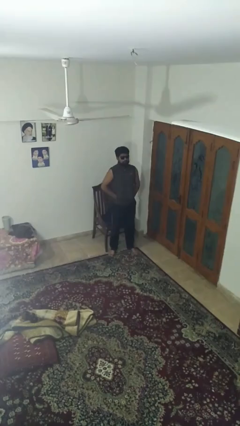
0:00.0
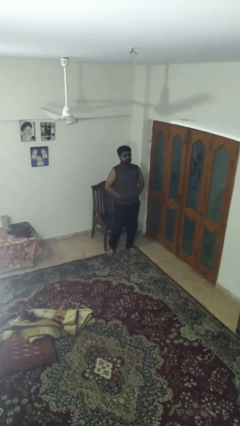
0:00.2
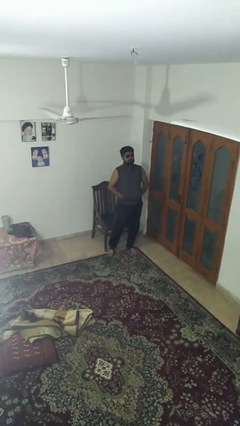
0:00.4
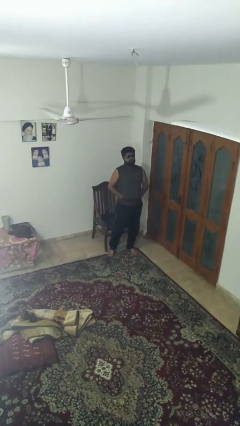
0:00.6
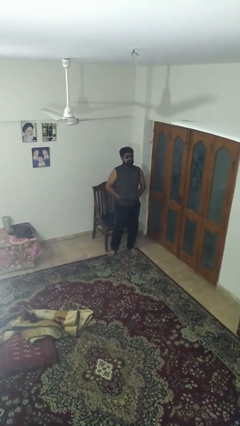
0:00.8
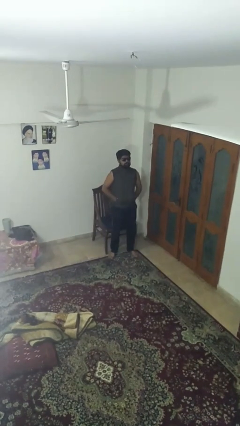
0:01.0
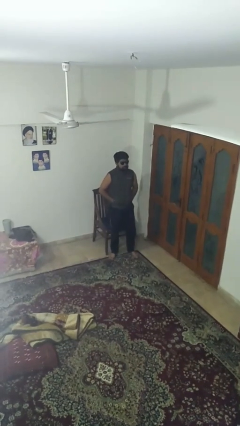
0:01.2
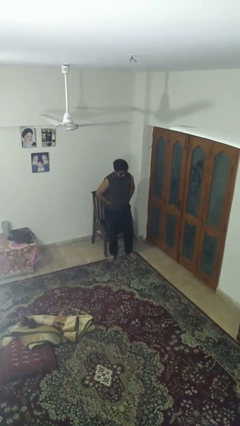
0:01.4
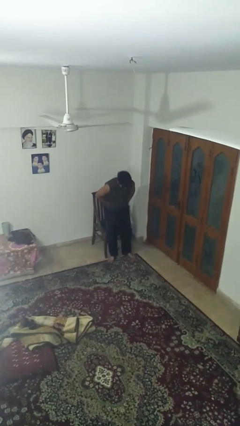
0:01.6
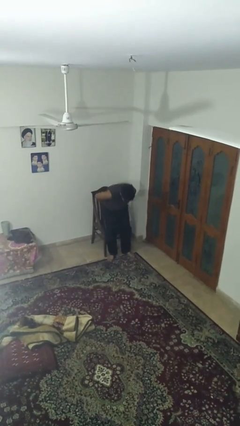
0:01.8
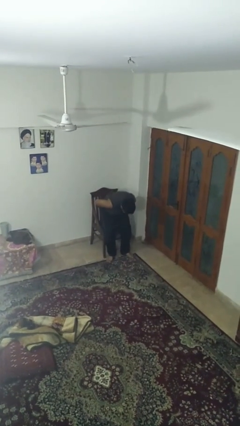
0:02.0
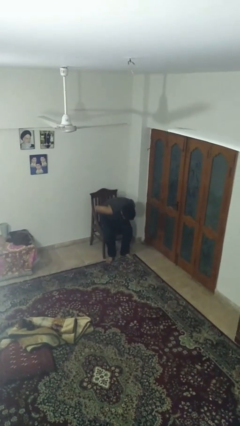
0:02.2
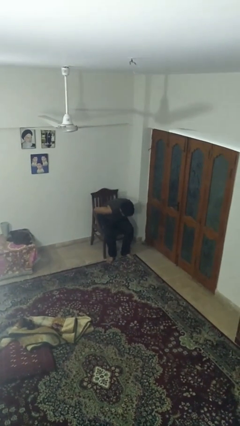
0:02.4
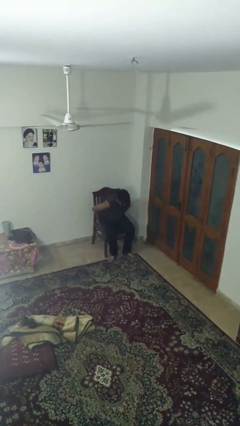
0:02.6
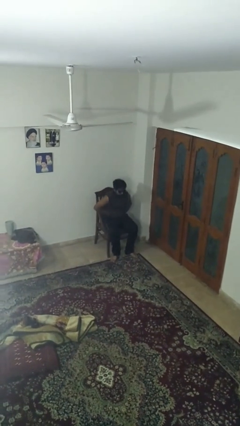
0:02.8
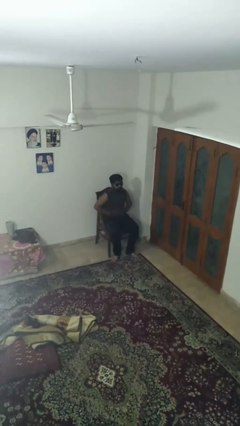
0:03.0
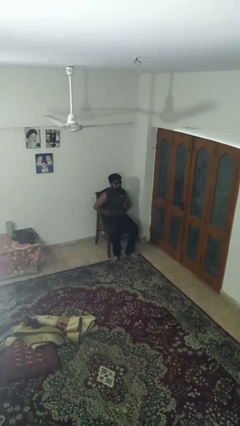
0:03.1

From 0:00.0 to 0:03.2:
person sits down

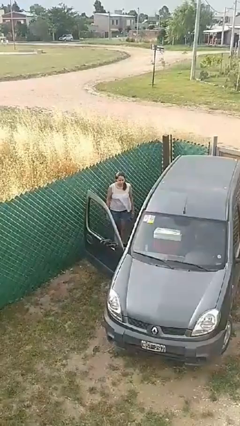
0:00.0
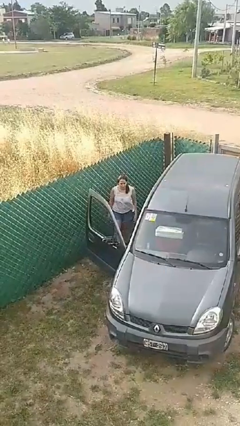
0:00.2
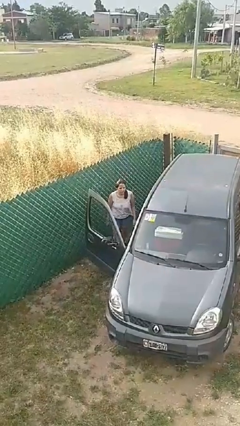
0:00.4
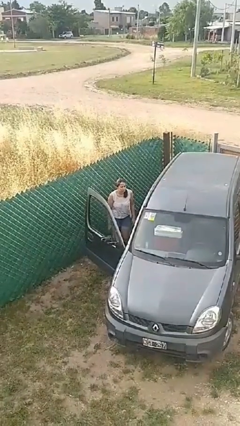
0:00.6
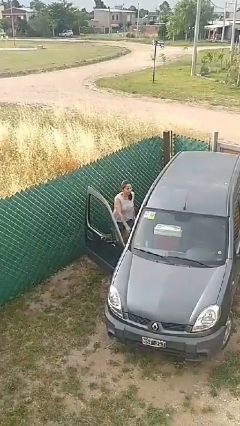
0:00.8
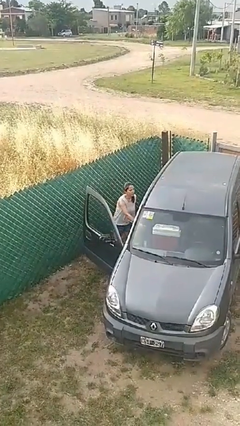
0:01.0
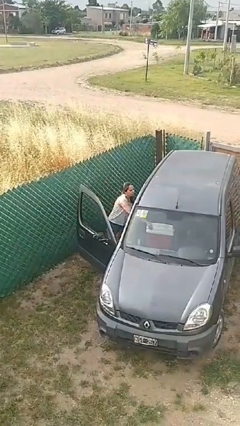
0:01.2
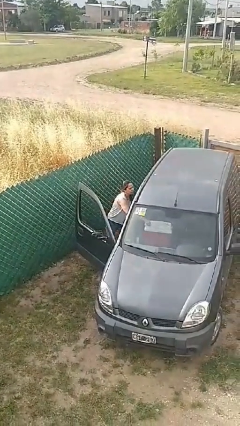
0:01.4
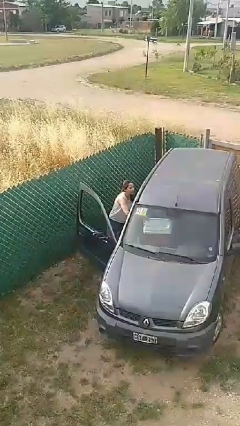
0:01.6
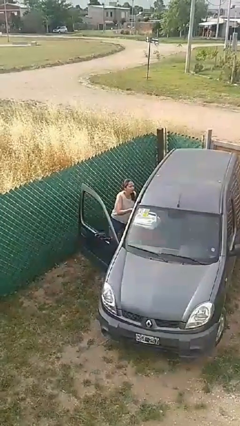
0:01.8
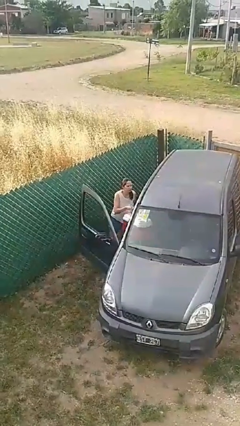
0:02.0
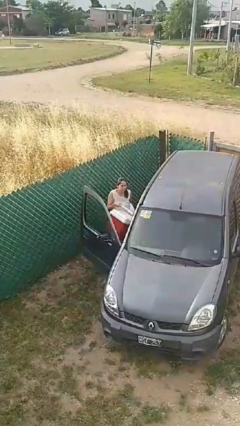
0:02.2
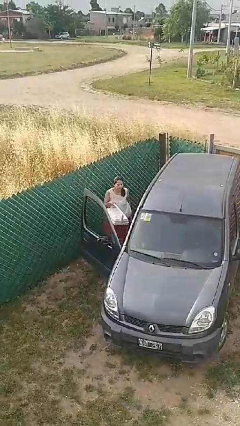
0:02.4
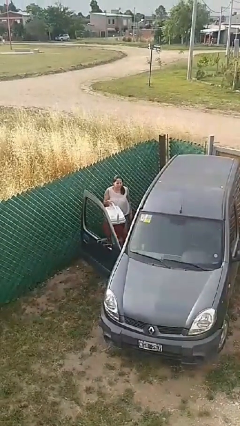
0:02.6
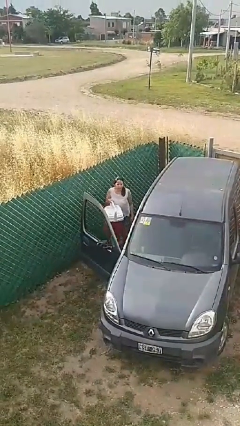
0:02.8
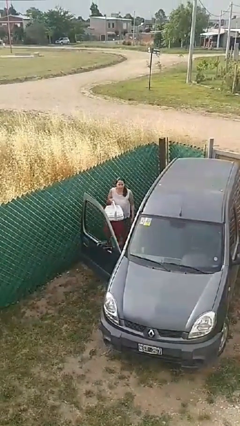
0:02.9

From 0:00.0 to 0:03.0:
person unloads car

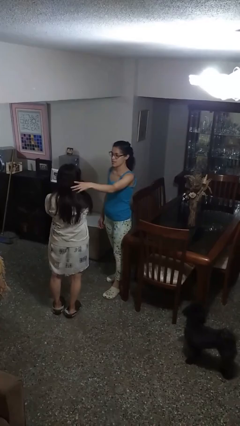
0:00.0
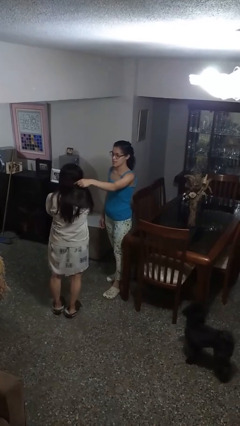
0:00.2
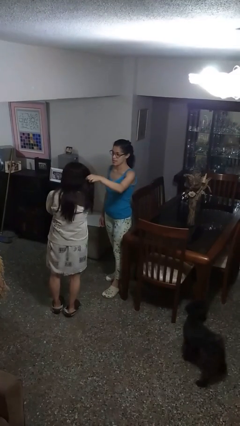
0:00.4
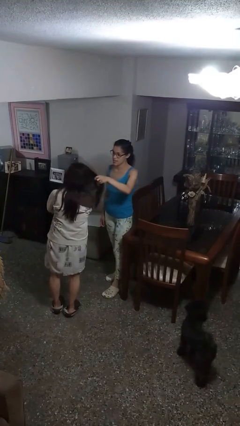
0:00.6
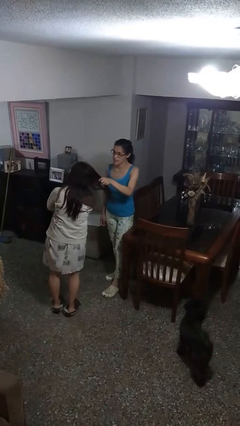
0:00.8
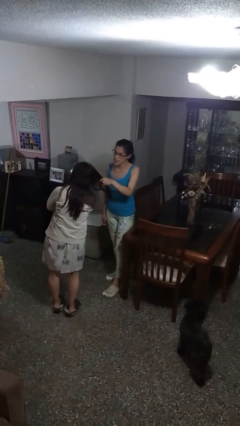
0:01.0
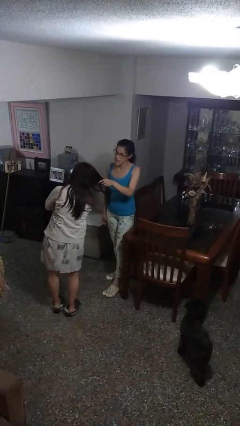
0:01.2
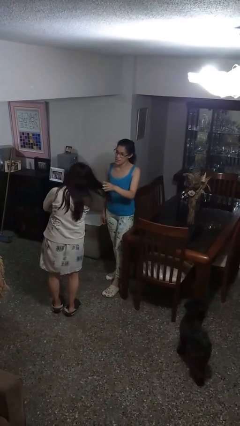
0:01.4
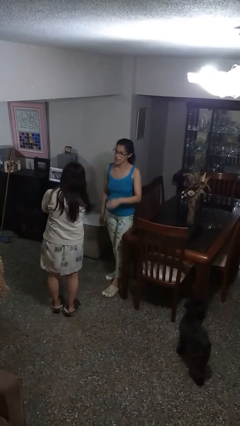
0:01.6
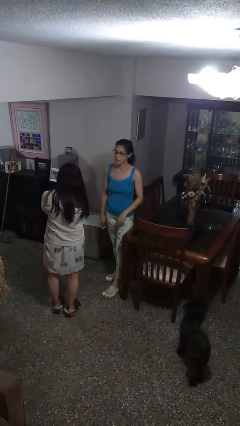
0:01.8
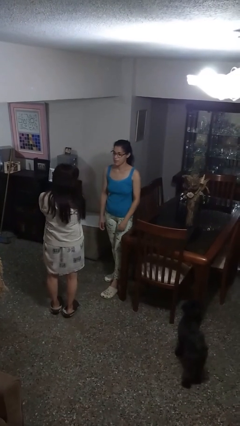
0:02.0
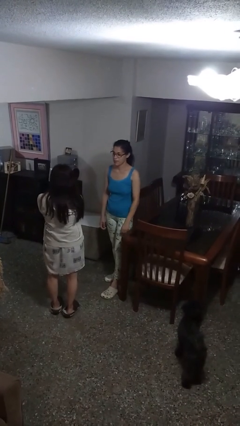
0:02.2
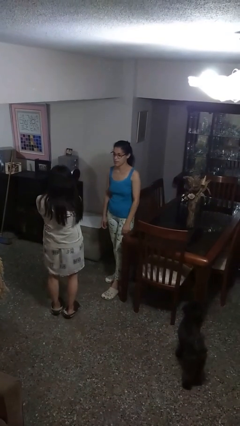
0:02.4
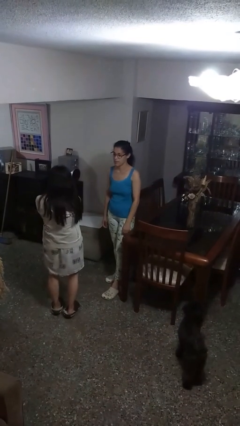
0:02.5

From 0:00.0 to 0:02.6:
person grabs person by hair

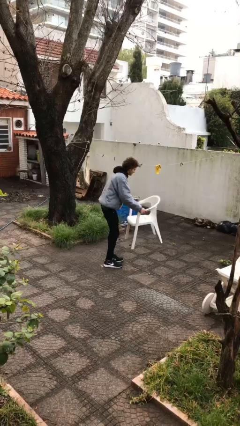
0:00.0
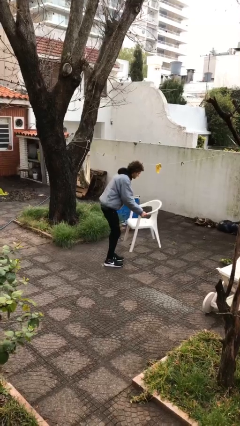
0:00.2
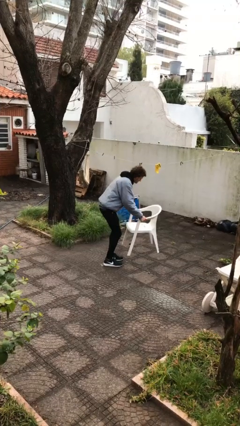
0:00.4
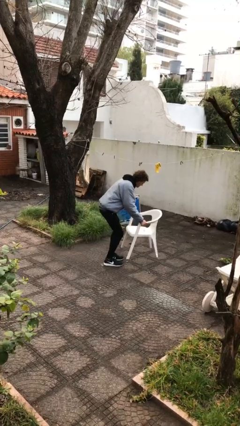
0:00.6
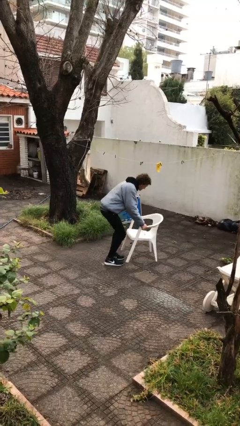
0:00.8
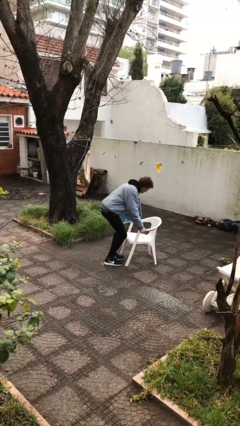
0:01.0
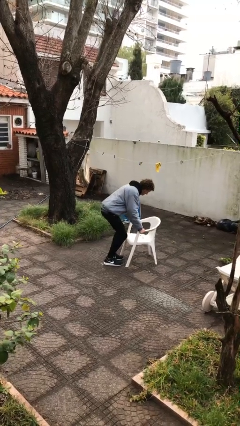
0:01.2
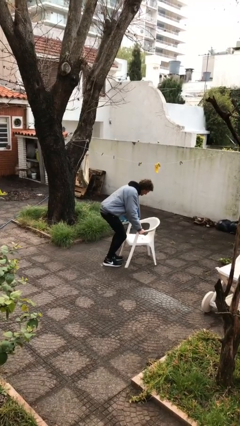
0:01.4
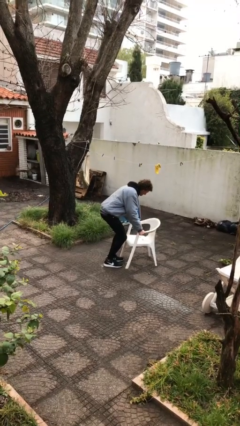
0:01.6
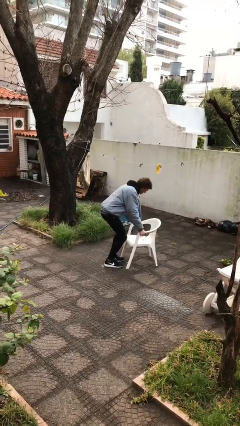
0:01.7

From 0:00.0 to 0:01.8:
person puts down object on floor

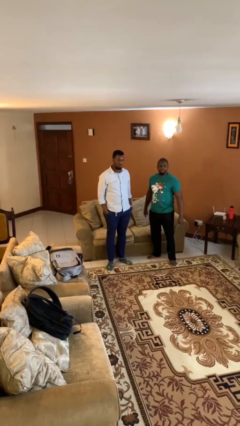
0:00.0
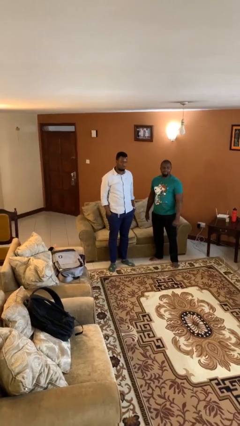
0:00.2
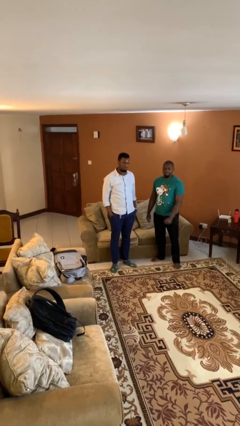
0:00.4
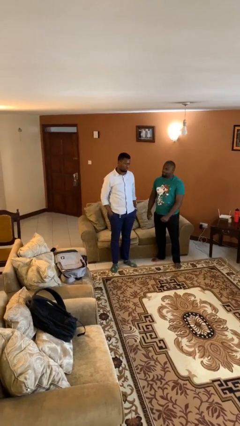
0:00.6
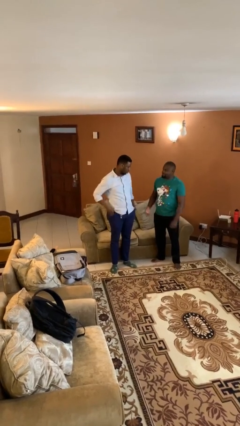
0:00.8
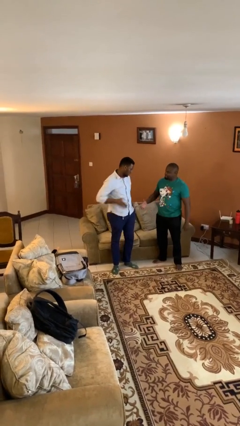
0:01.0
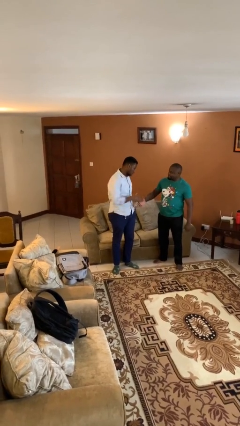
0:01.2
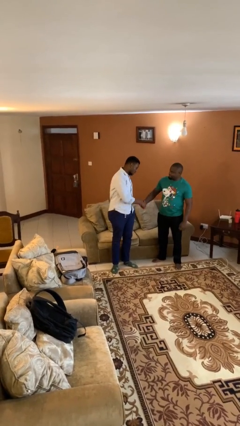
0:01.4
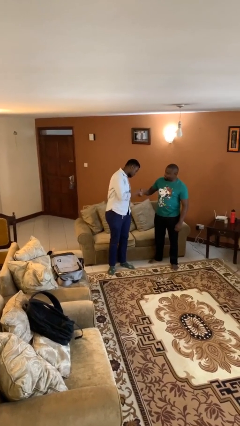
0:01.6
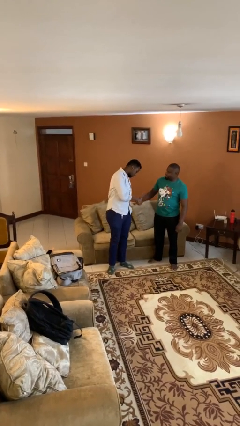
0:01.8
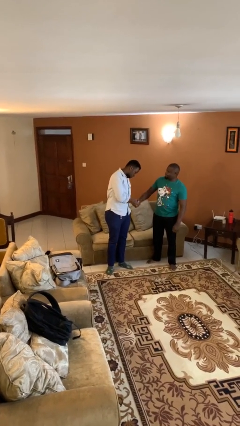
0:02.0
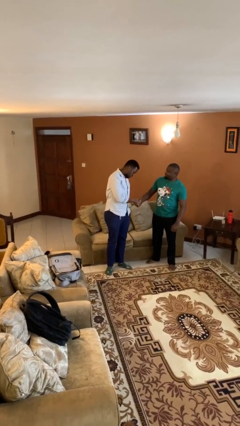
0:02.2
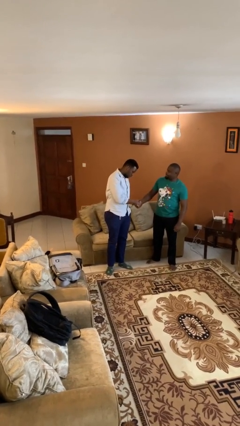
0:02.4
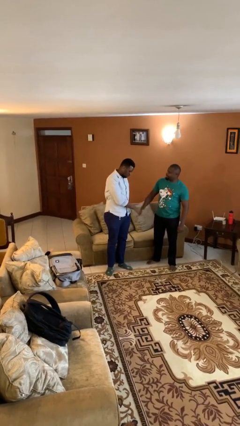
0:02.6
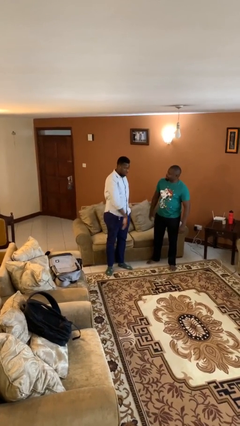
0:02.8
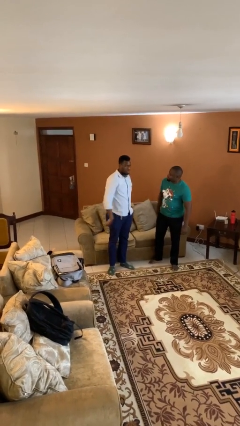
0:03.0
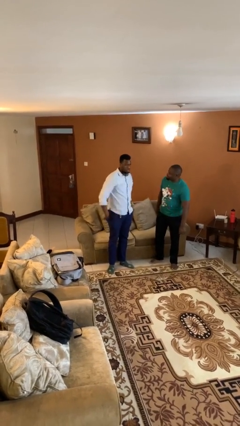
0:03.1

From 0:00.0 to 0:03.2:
person shakes hand

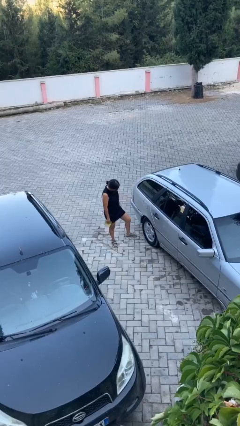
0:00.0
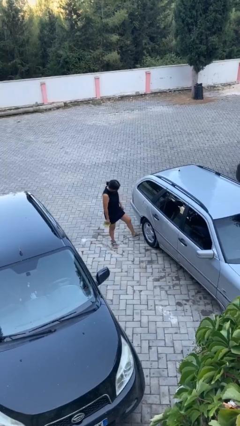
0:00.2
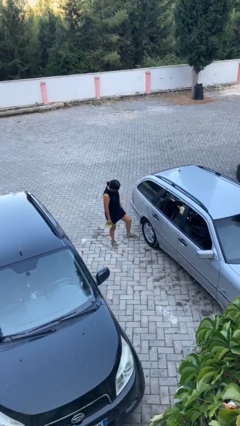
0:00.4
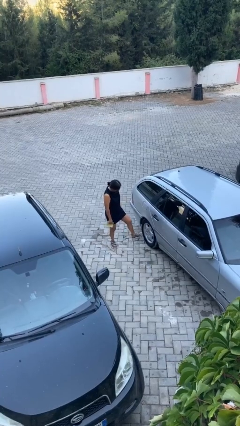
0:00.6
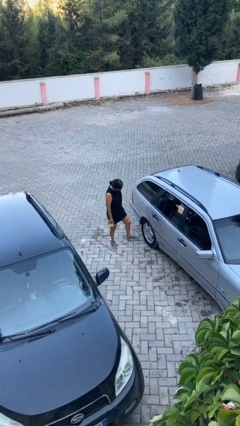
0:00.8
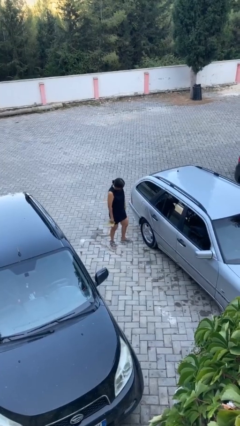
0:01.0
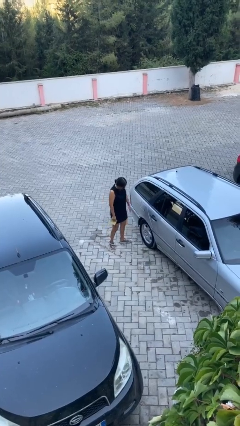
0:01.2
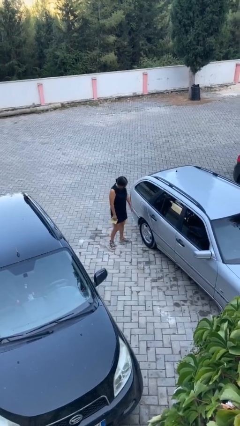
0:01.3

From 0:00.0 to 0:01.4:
person kicks car tires

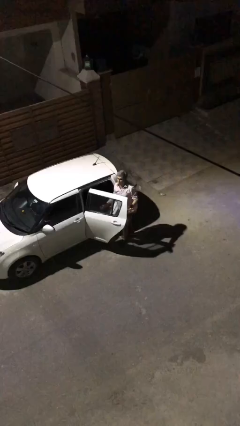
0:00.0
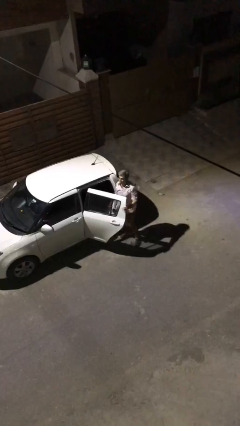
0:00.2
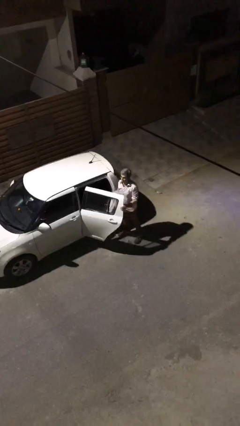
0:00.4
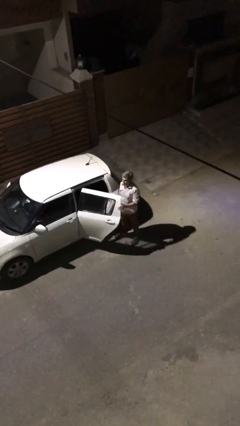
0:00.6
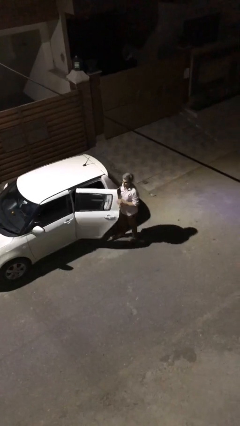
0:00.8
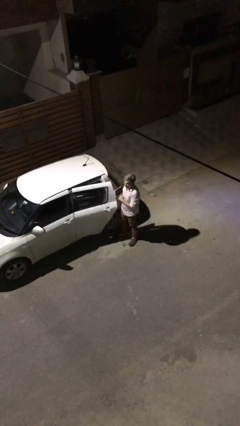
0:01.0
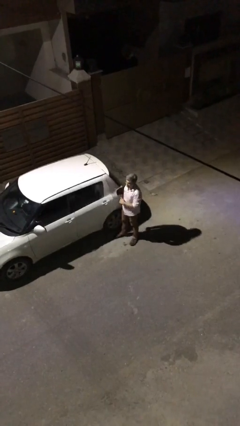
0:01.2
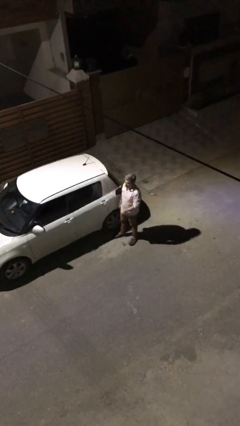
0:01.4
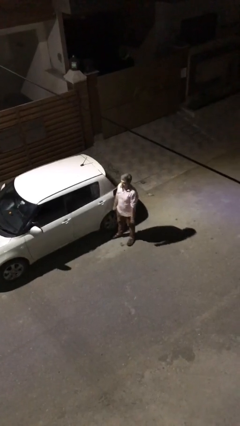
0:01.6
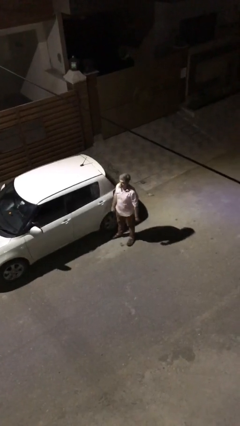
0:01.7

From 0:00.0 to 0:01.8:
person closes car door
